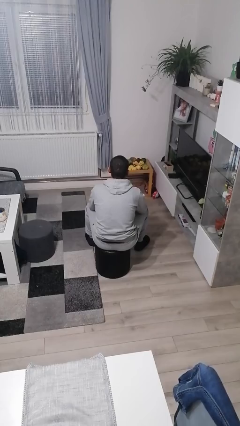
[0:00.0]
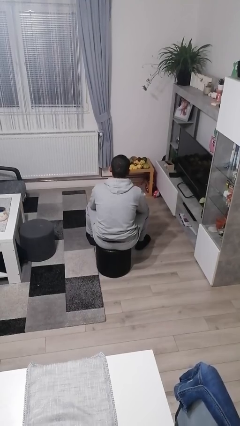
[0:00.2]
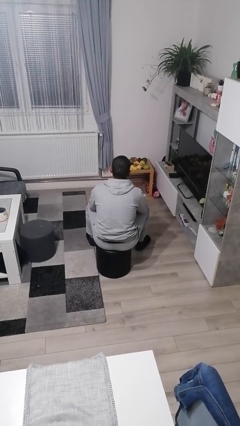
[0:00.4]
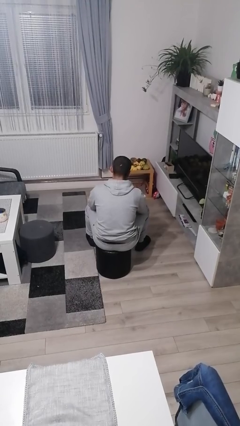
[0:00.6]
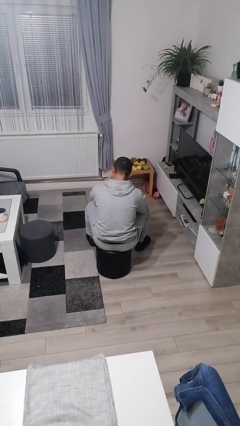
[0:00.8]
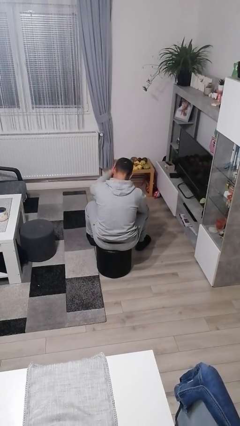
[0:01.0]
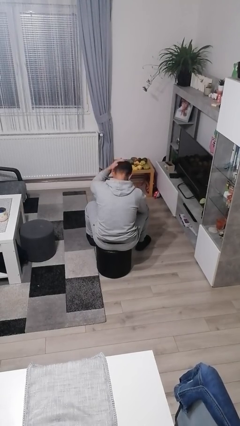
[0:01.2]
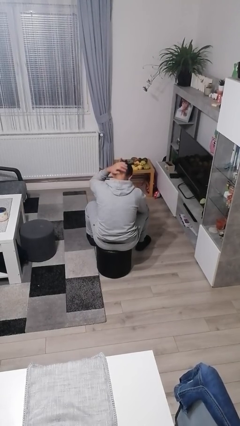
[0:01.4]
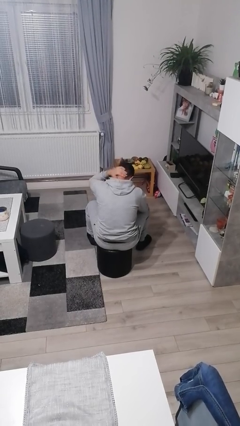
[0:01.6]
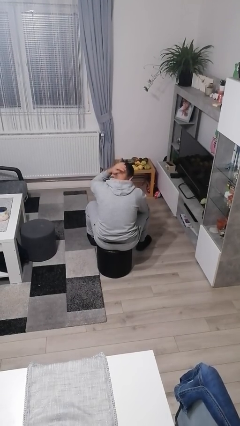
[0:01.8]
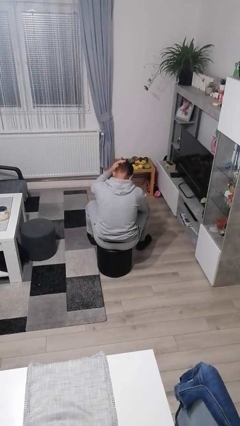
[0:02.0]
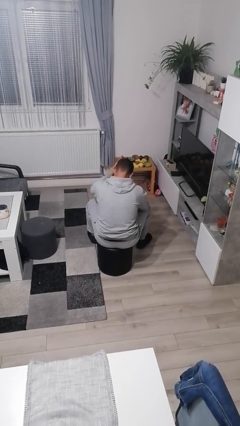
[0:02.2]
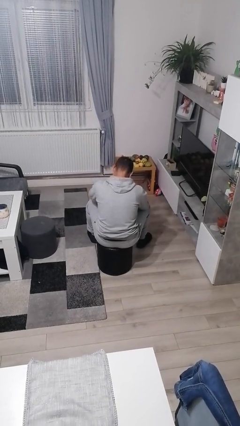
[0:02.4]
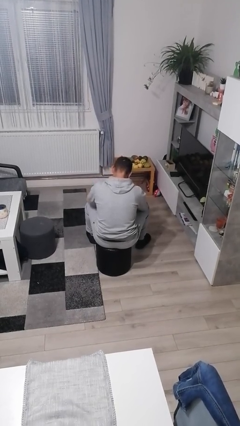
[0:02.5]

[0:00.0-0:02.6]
person strokes hair

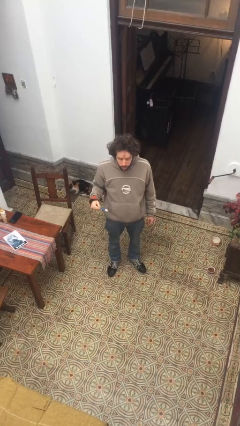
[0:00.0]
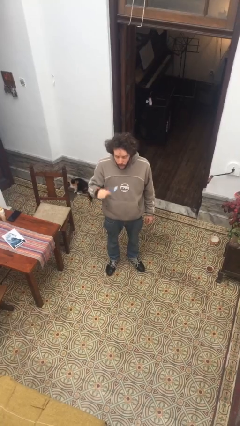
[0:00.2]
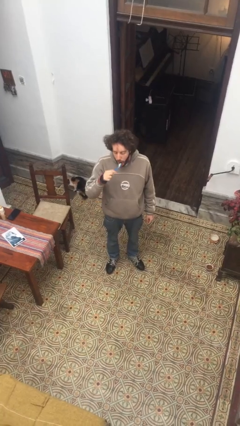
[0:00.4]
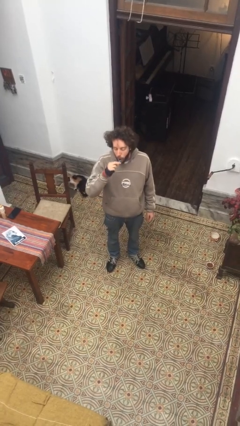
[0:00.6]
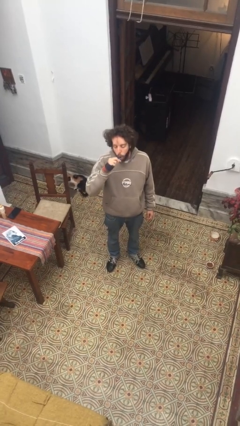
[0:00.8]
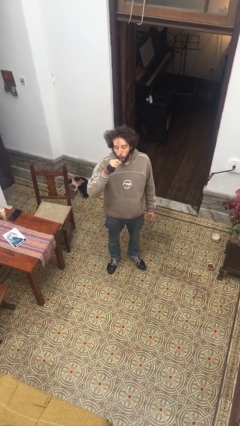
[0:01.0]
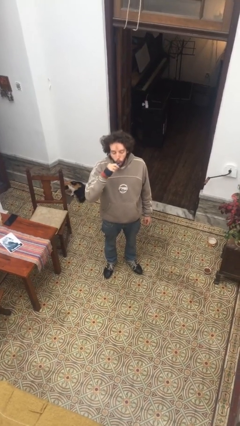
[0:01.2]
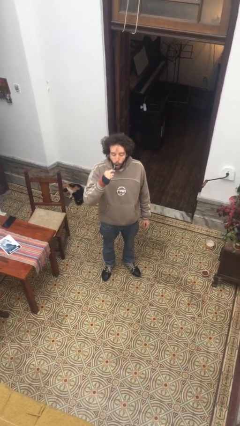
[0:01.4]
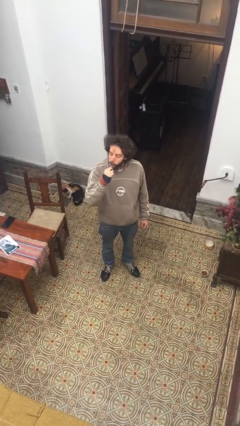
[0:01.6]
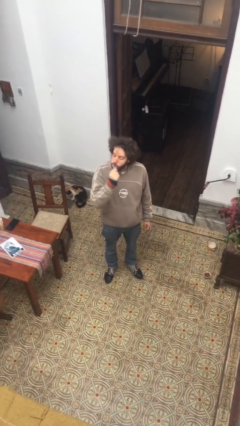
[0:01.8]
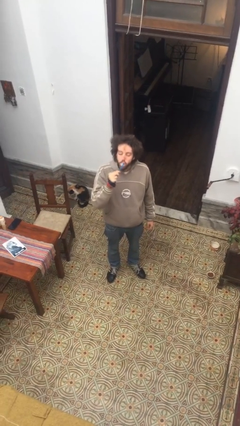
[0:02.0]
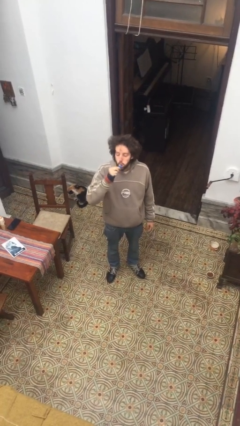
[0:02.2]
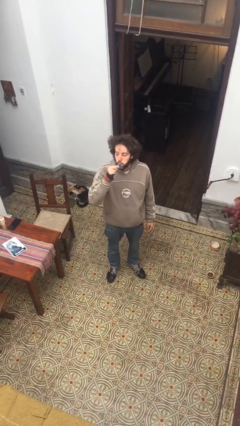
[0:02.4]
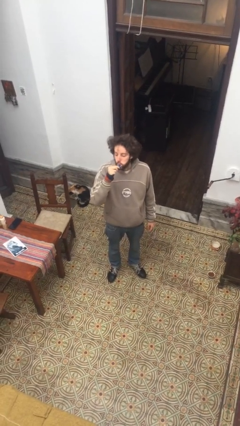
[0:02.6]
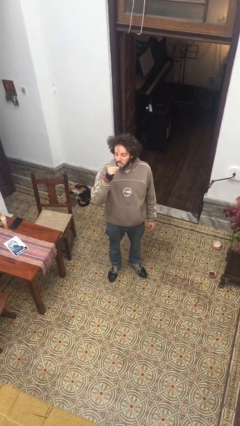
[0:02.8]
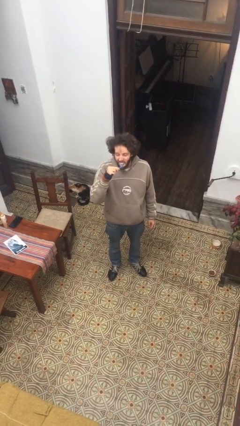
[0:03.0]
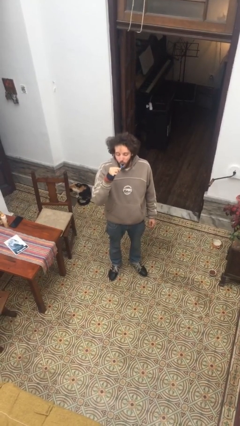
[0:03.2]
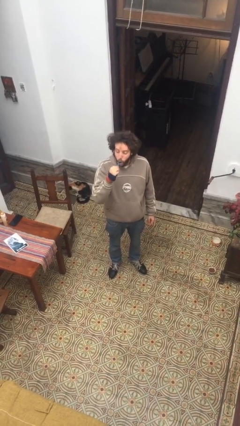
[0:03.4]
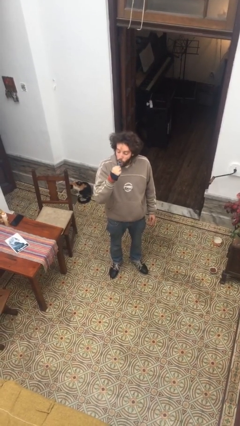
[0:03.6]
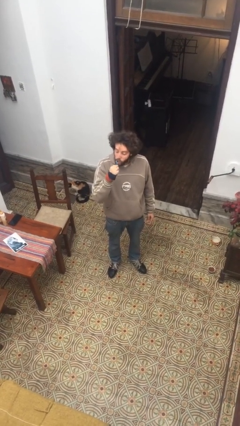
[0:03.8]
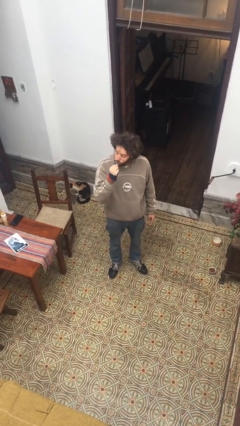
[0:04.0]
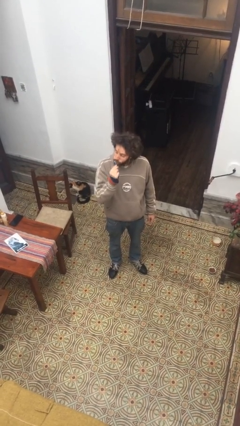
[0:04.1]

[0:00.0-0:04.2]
person brushes teeth

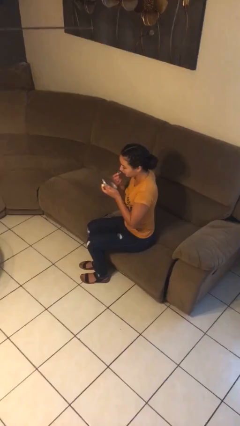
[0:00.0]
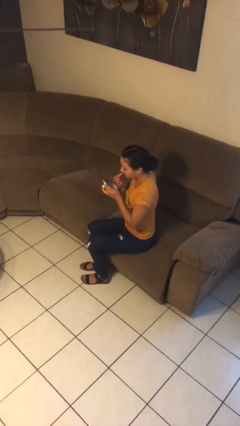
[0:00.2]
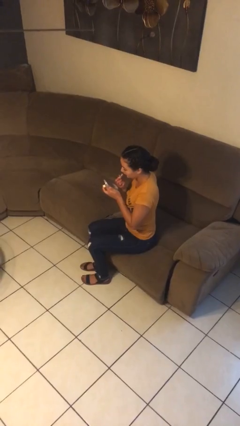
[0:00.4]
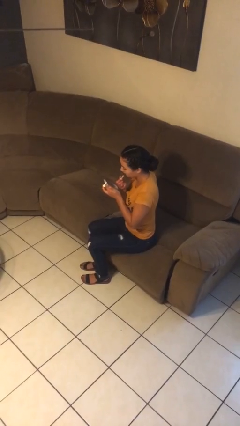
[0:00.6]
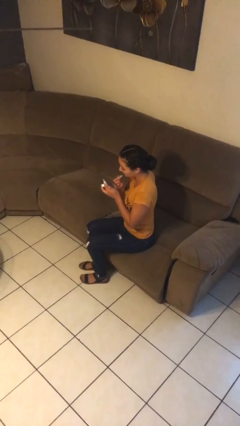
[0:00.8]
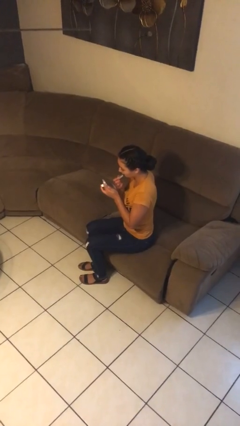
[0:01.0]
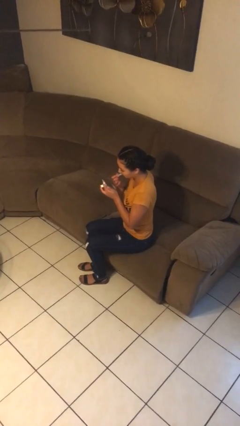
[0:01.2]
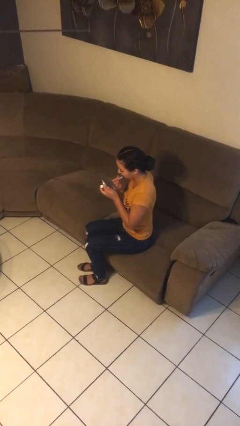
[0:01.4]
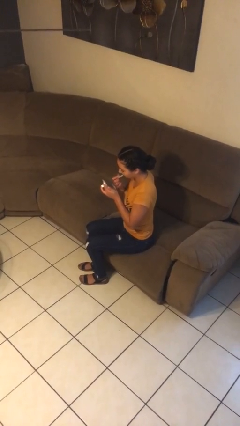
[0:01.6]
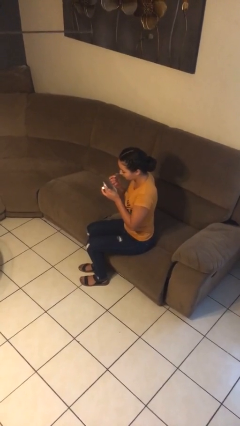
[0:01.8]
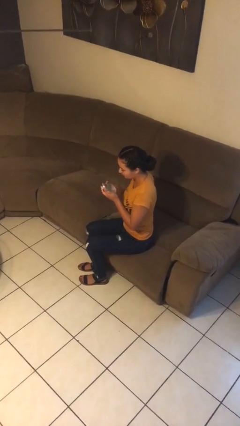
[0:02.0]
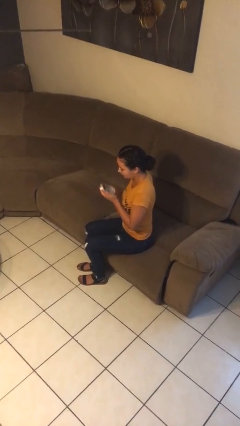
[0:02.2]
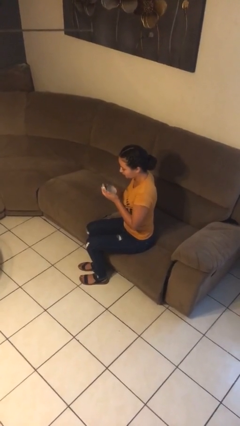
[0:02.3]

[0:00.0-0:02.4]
person applies lip makeup

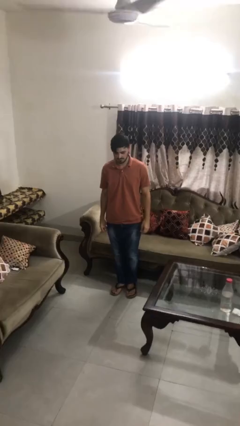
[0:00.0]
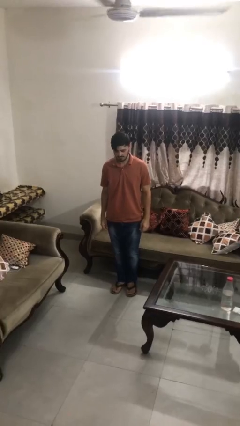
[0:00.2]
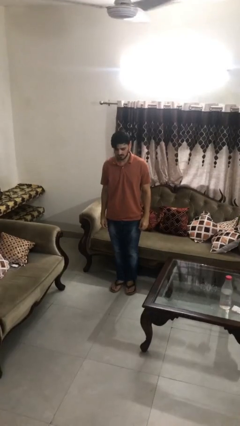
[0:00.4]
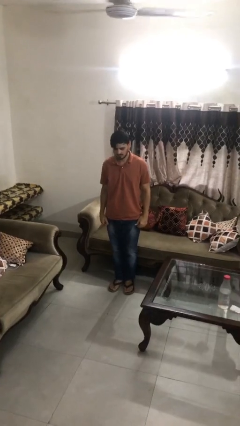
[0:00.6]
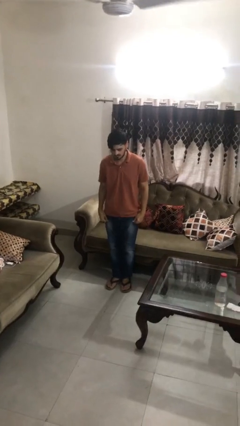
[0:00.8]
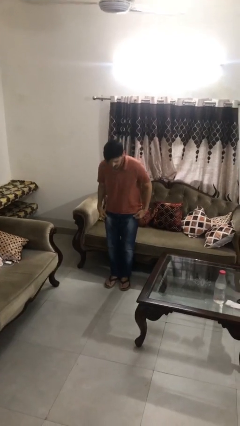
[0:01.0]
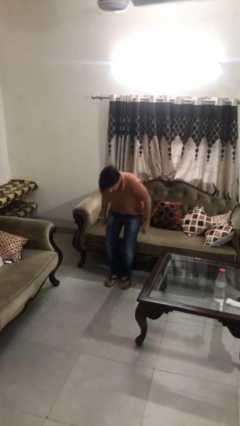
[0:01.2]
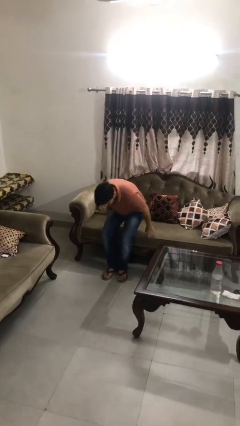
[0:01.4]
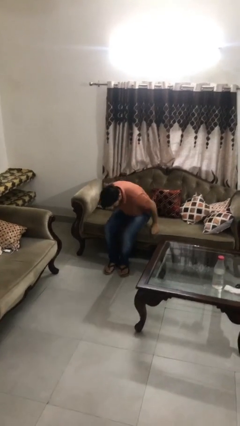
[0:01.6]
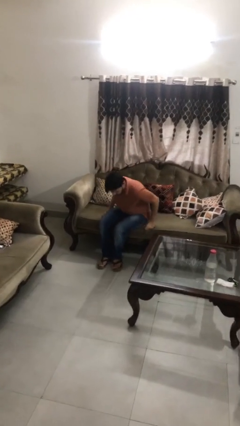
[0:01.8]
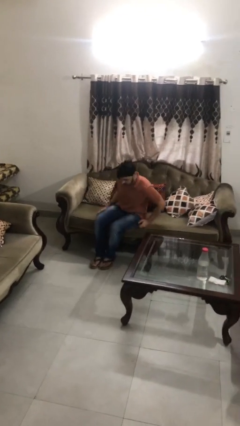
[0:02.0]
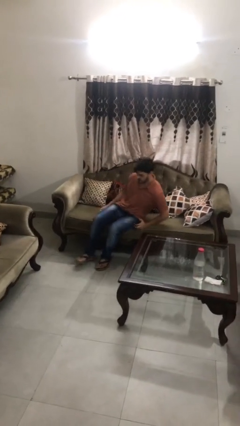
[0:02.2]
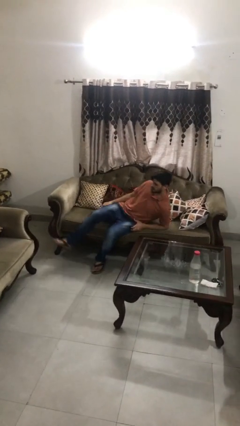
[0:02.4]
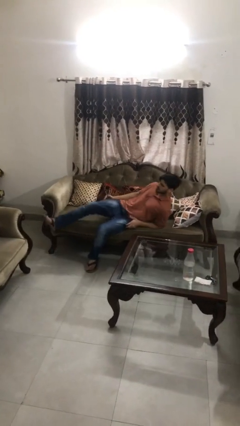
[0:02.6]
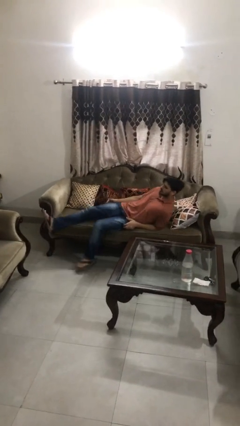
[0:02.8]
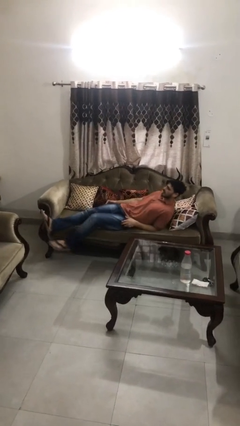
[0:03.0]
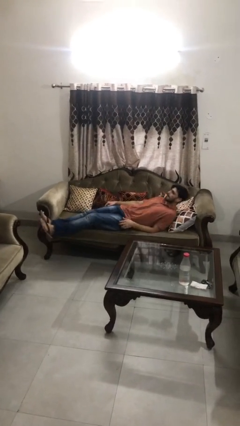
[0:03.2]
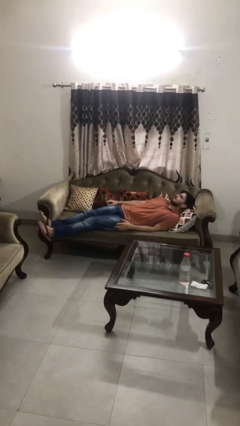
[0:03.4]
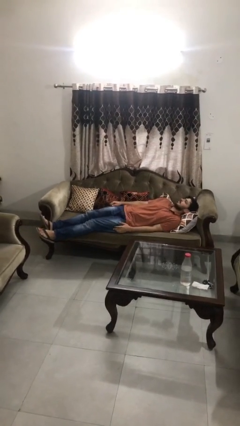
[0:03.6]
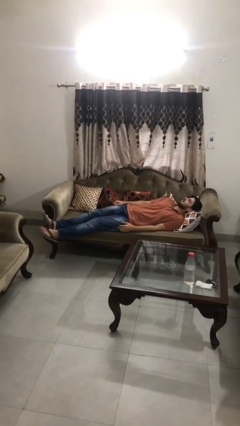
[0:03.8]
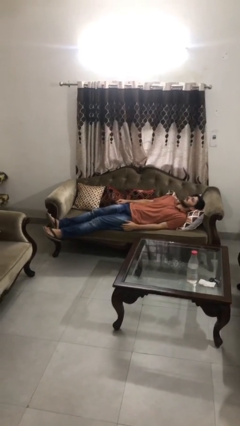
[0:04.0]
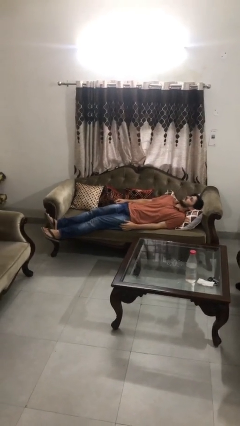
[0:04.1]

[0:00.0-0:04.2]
person lies down on couch

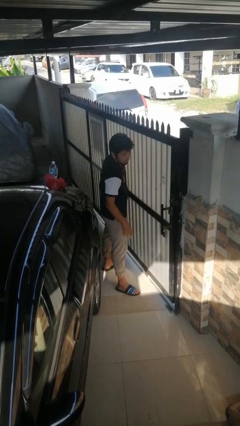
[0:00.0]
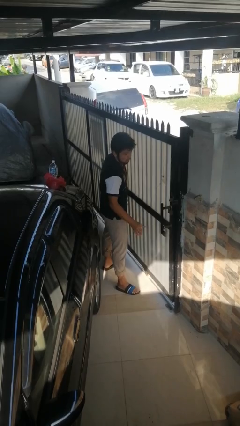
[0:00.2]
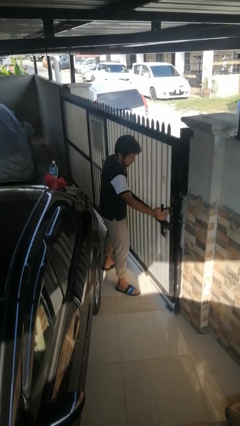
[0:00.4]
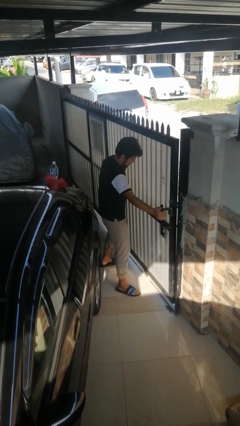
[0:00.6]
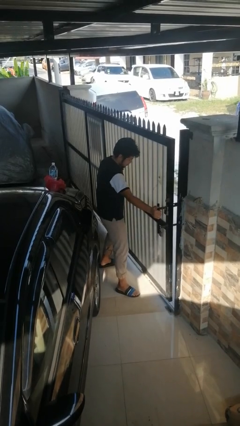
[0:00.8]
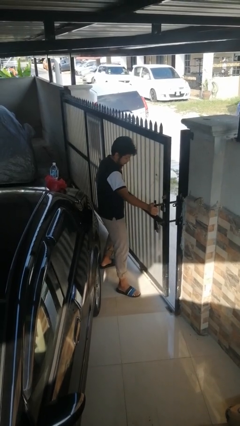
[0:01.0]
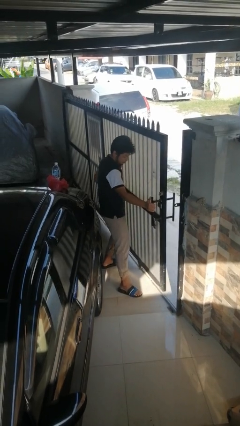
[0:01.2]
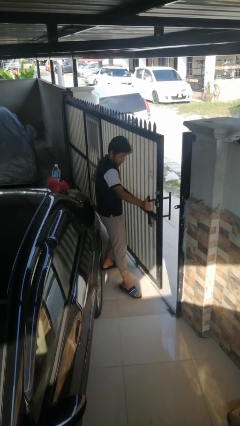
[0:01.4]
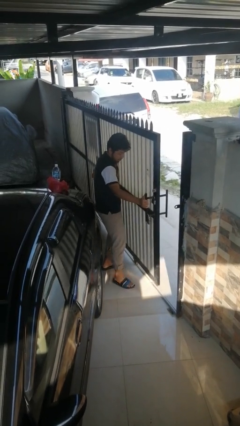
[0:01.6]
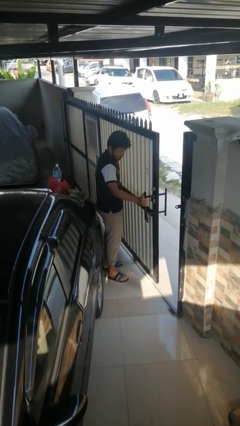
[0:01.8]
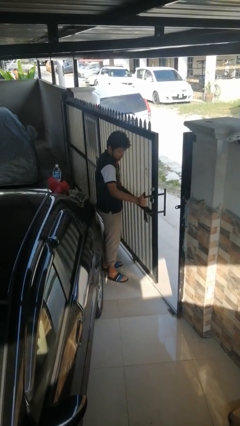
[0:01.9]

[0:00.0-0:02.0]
person opens sliding door

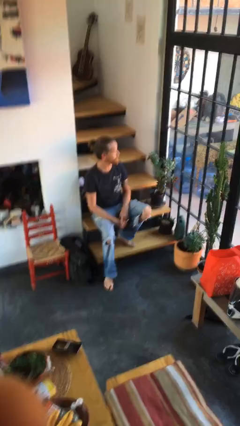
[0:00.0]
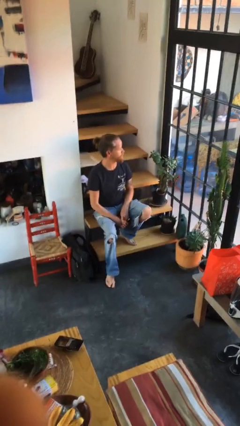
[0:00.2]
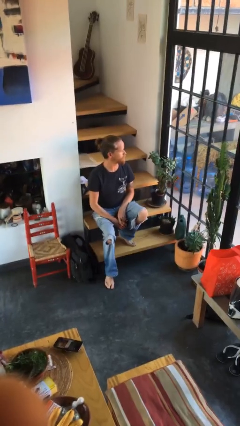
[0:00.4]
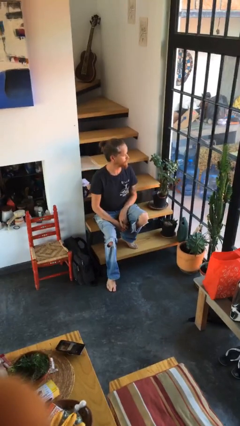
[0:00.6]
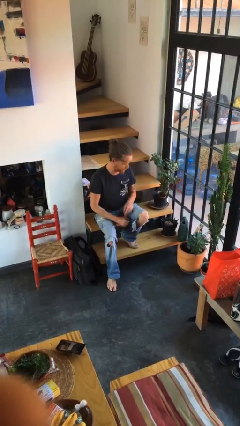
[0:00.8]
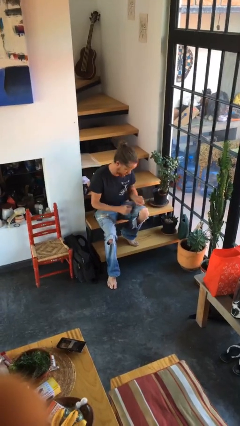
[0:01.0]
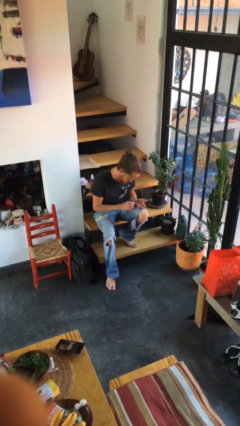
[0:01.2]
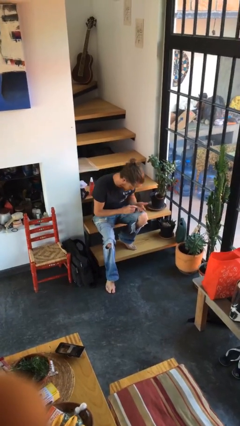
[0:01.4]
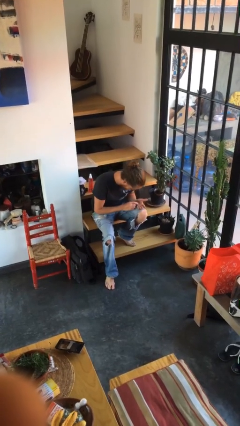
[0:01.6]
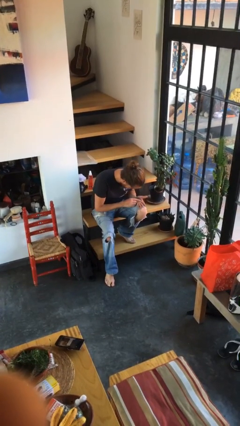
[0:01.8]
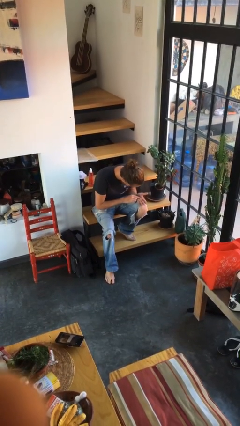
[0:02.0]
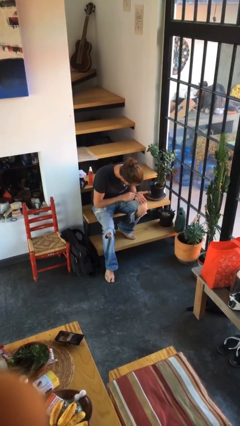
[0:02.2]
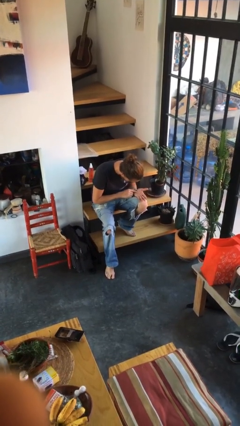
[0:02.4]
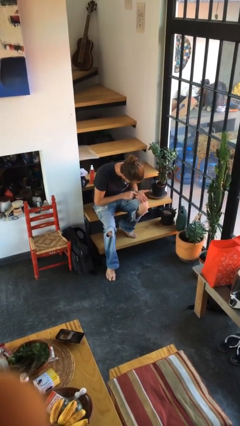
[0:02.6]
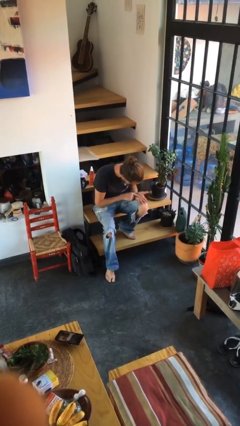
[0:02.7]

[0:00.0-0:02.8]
person looks at hands in lap
